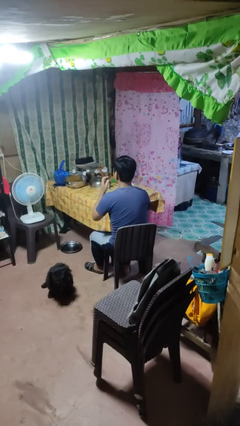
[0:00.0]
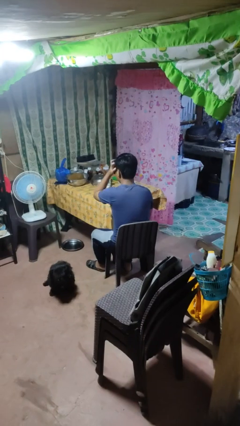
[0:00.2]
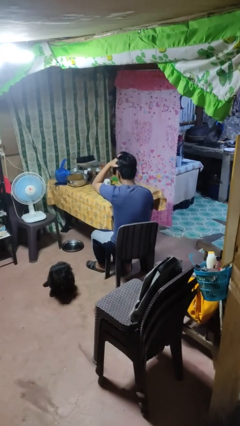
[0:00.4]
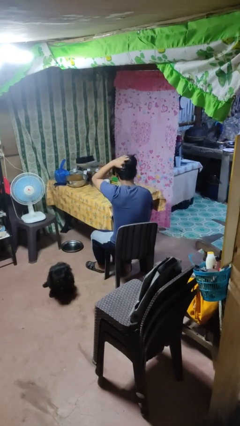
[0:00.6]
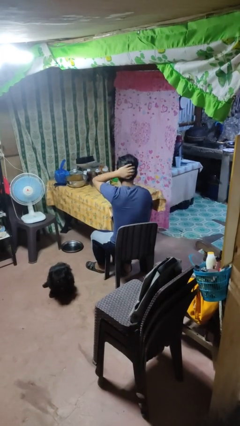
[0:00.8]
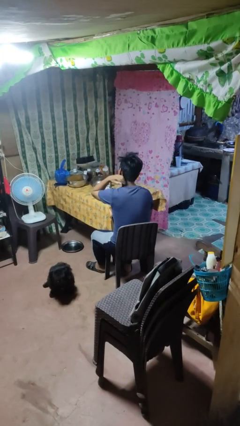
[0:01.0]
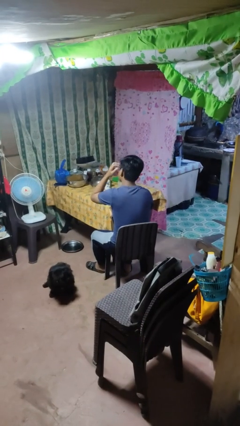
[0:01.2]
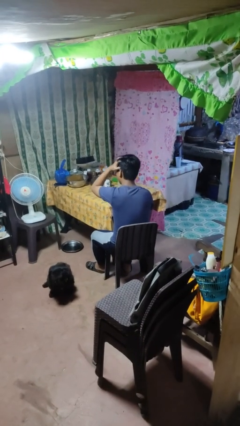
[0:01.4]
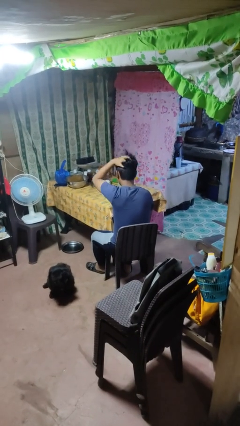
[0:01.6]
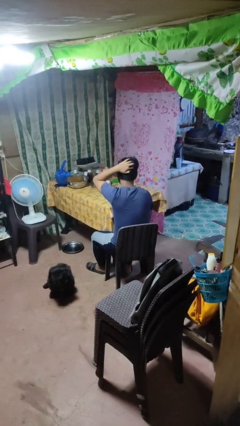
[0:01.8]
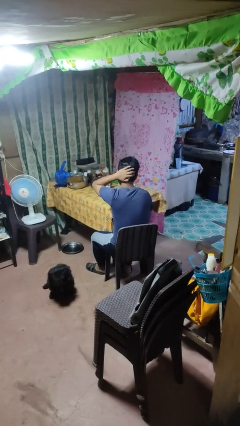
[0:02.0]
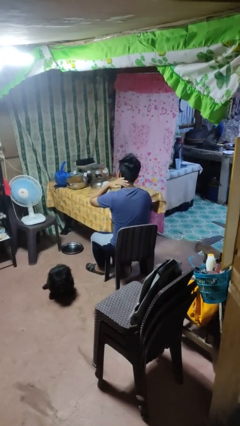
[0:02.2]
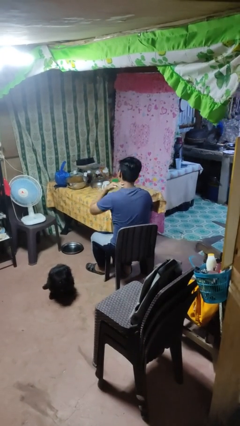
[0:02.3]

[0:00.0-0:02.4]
person strokes hair

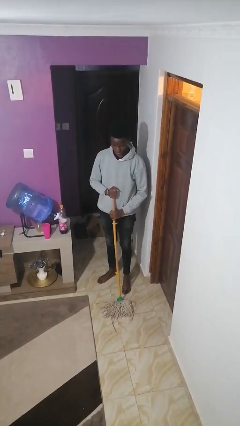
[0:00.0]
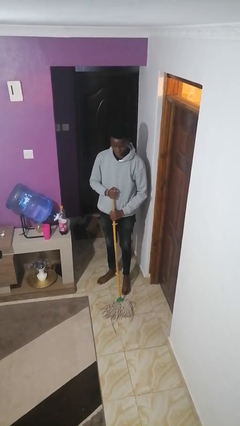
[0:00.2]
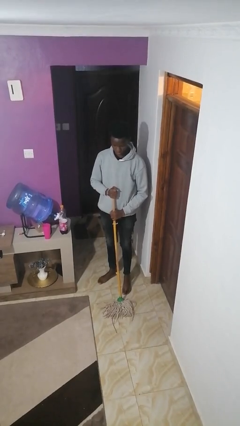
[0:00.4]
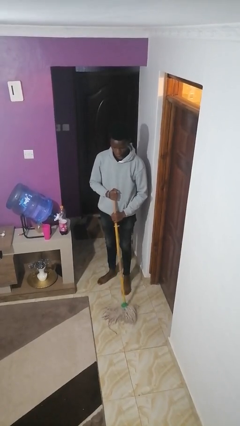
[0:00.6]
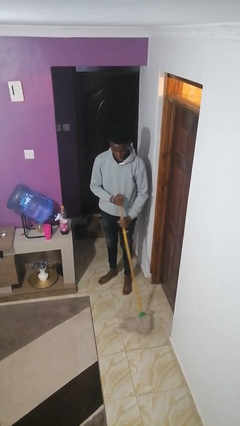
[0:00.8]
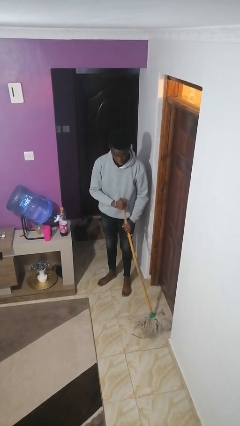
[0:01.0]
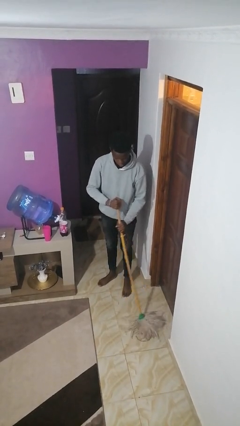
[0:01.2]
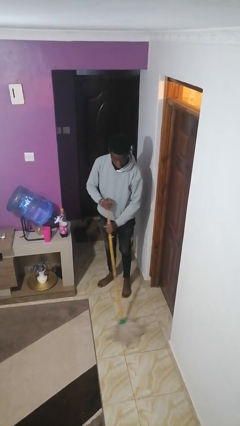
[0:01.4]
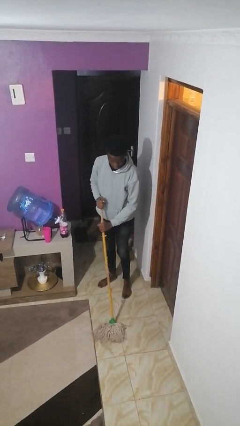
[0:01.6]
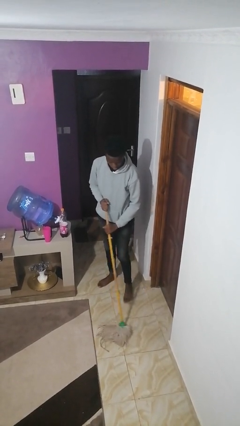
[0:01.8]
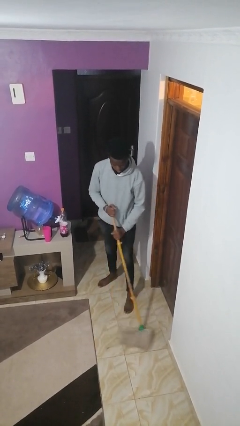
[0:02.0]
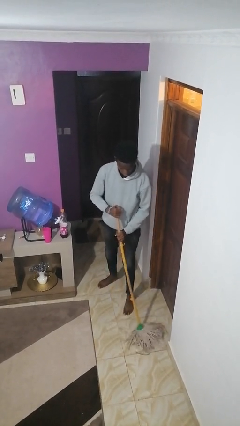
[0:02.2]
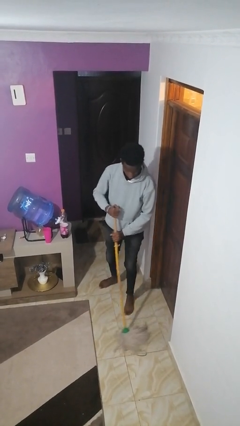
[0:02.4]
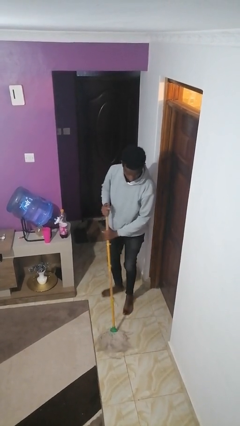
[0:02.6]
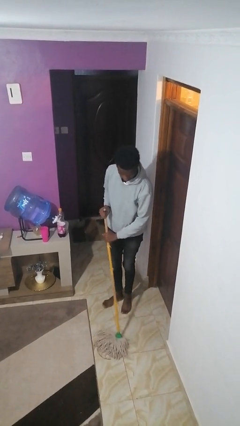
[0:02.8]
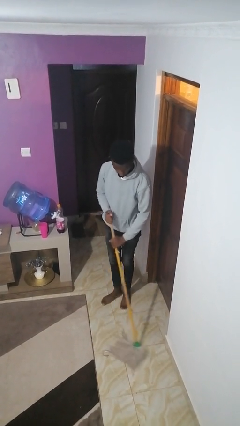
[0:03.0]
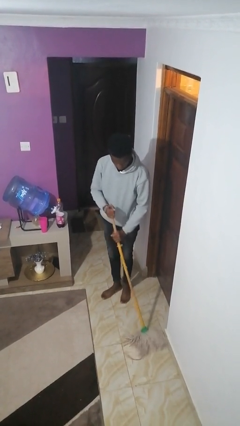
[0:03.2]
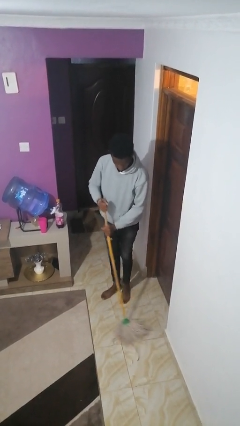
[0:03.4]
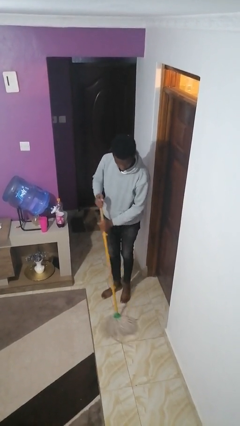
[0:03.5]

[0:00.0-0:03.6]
person mops

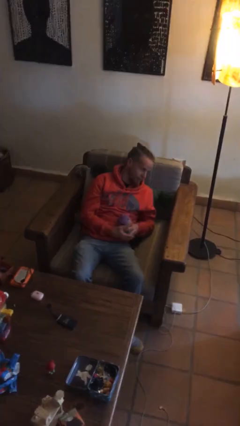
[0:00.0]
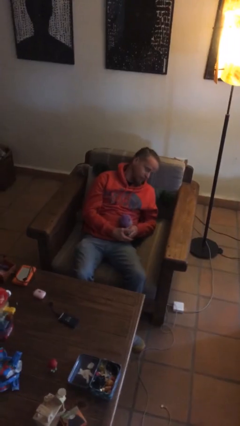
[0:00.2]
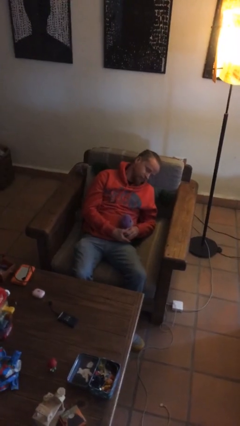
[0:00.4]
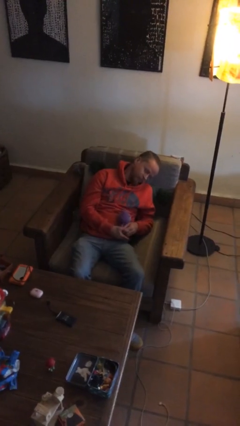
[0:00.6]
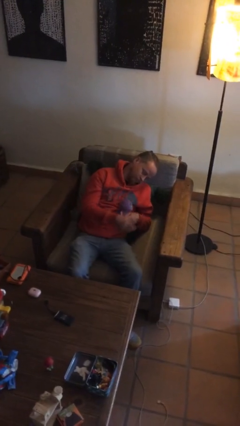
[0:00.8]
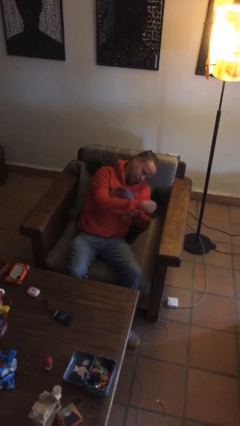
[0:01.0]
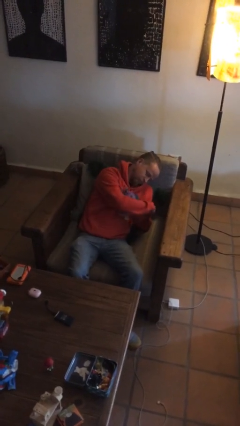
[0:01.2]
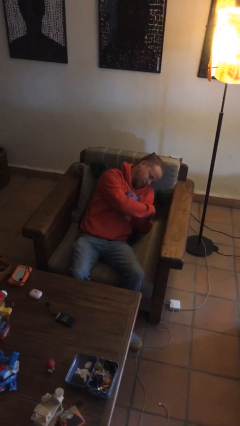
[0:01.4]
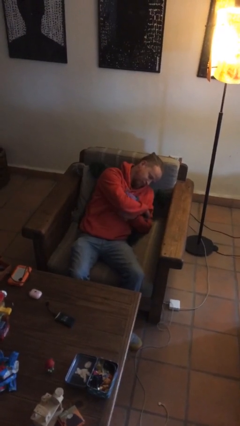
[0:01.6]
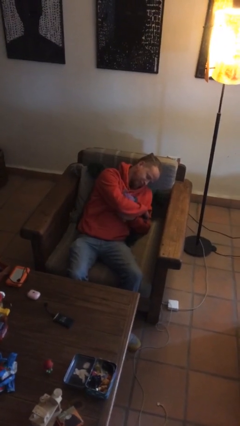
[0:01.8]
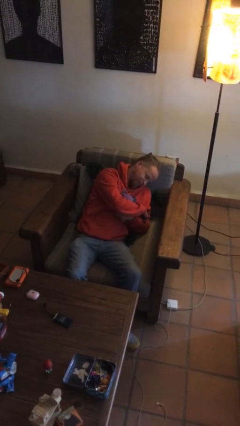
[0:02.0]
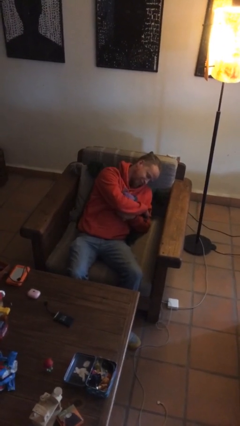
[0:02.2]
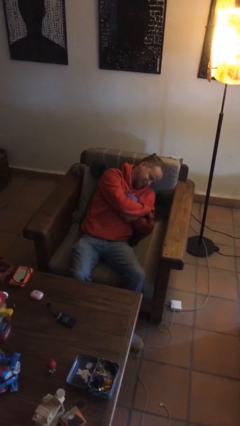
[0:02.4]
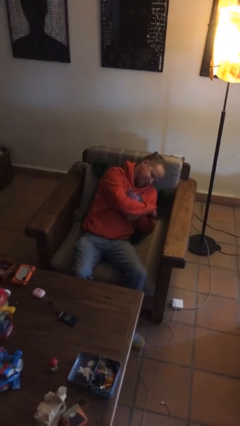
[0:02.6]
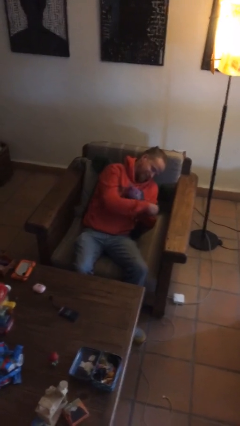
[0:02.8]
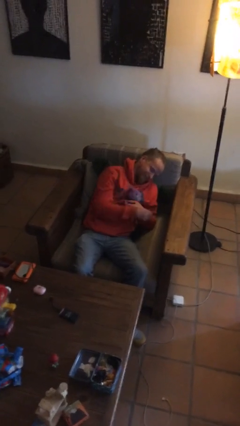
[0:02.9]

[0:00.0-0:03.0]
person hugs stuffed animal

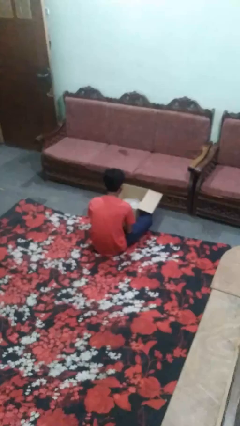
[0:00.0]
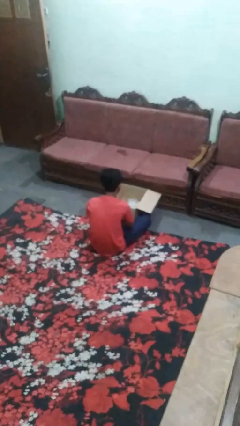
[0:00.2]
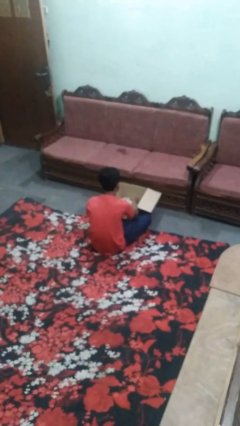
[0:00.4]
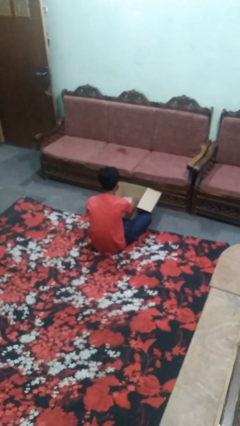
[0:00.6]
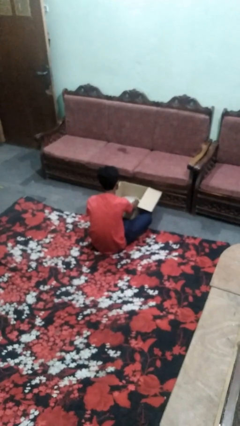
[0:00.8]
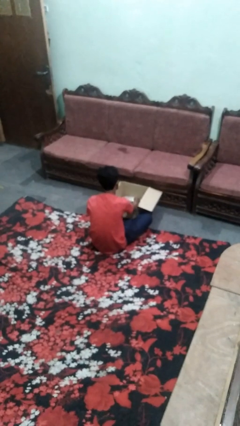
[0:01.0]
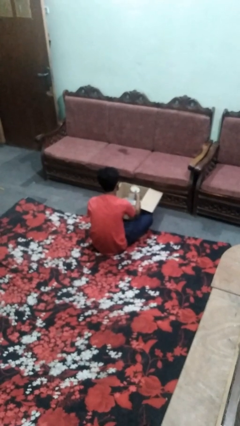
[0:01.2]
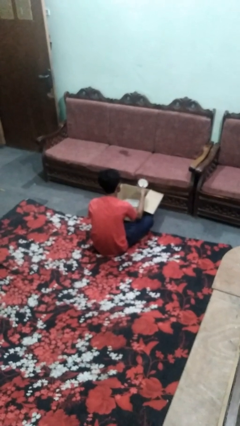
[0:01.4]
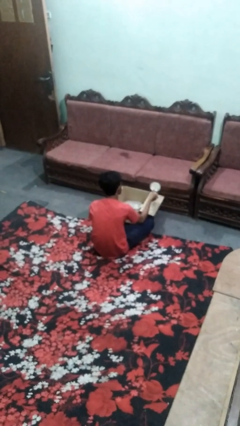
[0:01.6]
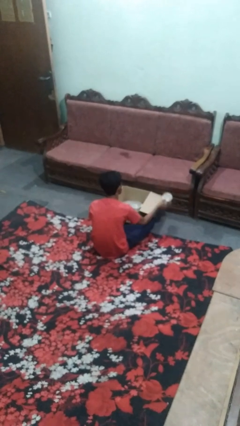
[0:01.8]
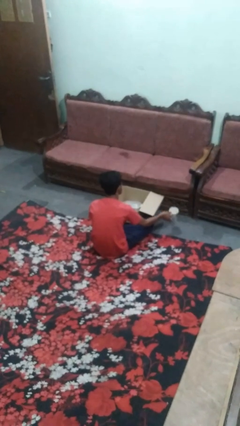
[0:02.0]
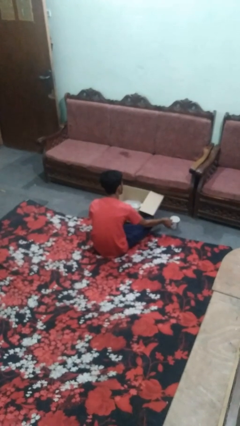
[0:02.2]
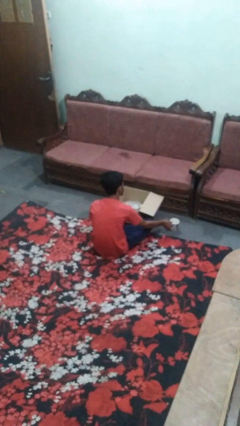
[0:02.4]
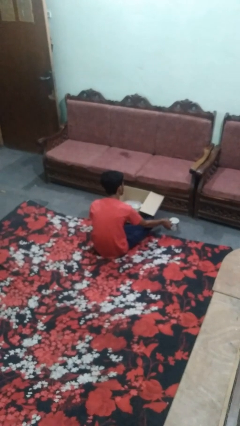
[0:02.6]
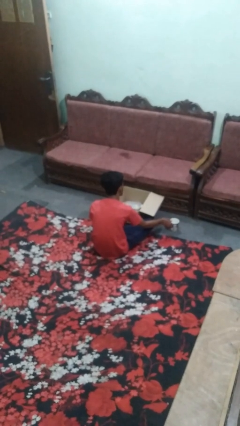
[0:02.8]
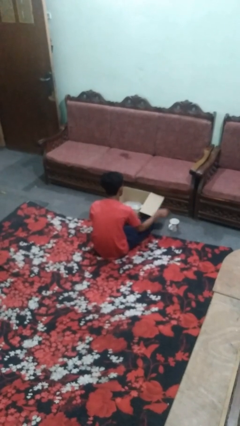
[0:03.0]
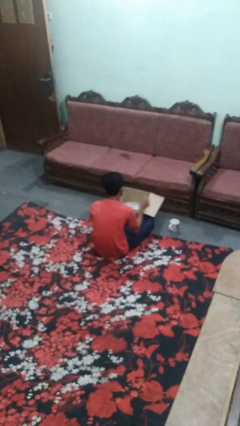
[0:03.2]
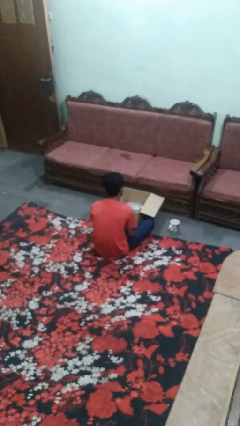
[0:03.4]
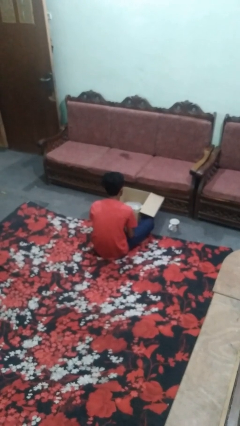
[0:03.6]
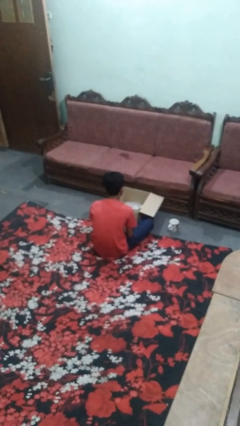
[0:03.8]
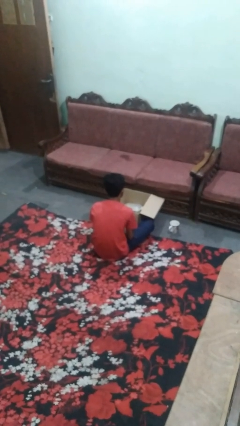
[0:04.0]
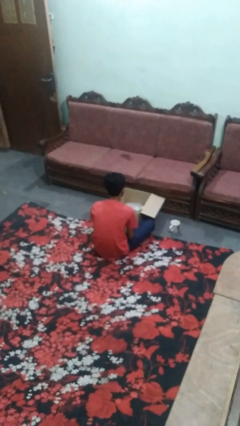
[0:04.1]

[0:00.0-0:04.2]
person takes object from box

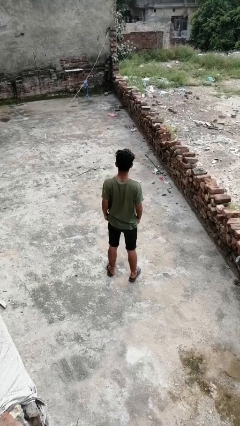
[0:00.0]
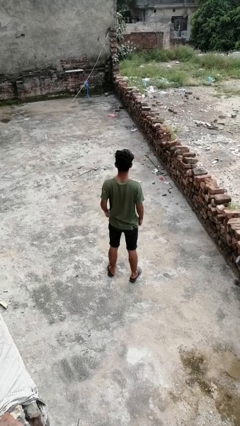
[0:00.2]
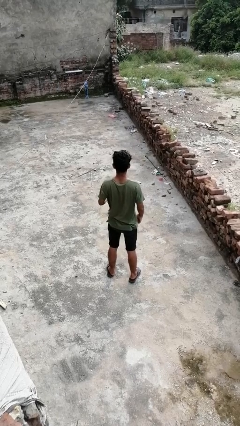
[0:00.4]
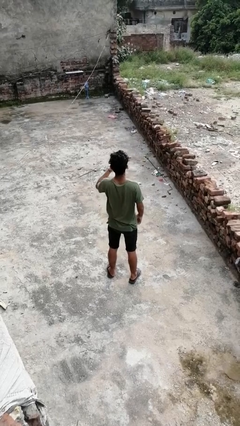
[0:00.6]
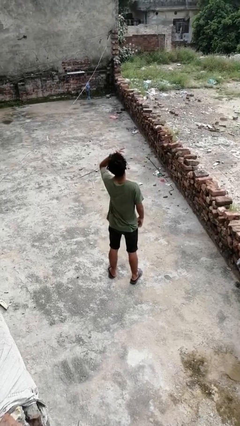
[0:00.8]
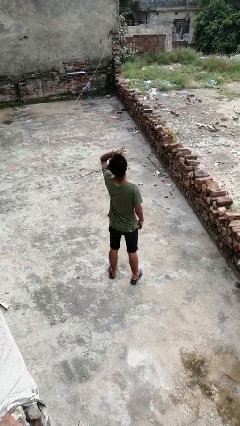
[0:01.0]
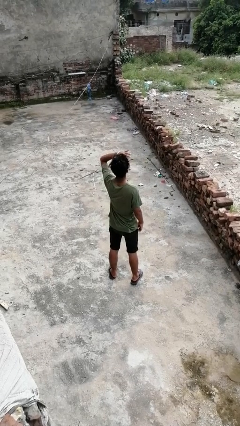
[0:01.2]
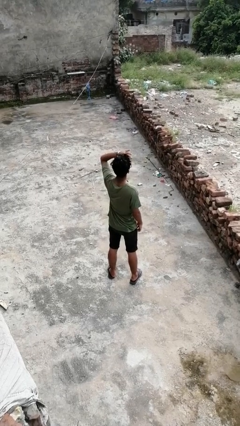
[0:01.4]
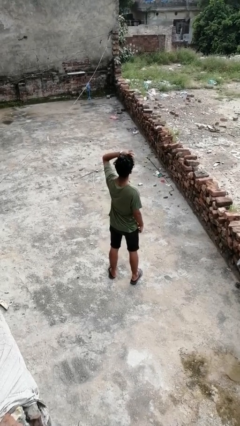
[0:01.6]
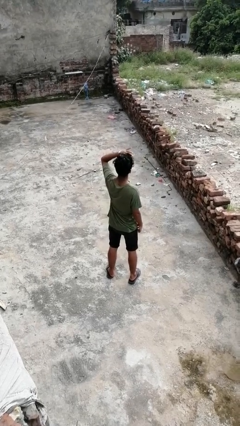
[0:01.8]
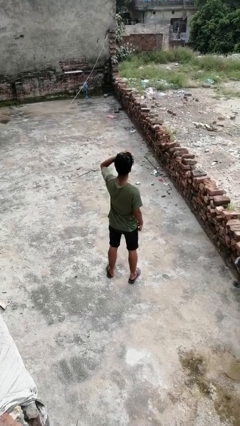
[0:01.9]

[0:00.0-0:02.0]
person shades eyes

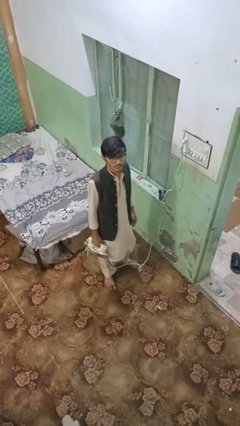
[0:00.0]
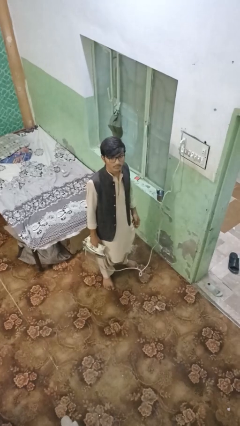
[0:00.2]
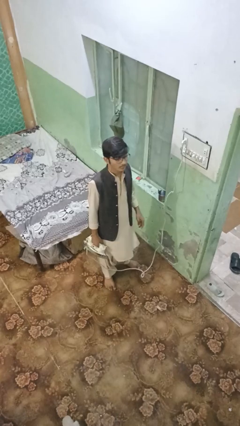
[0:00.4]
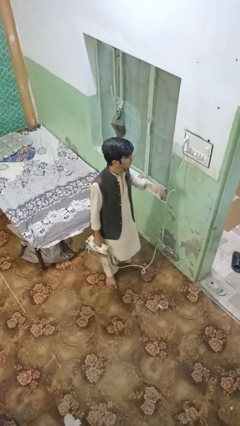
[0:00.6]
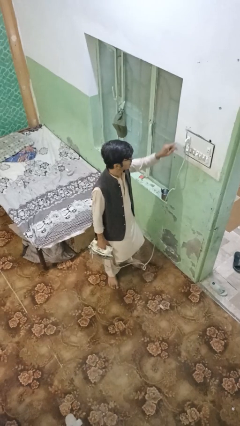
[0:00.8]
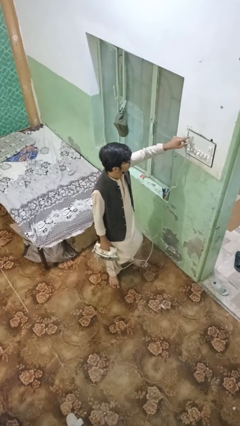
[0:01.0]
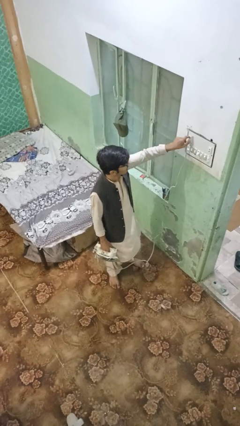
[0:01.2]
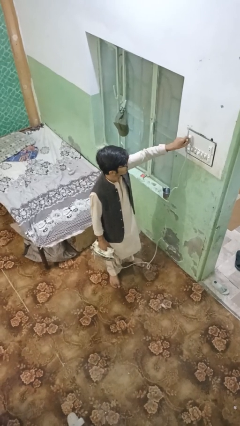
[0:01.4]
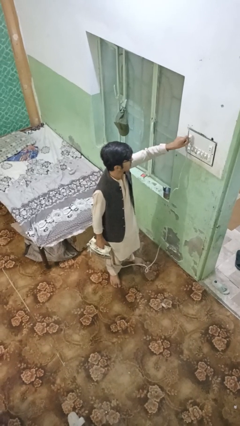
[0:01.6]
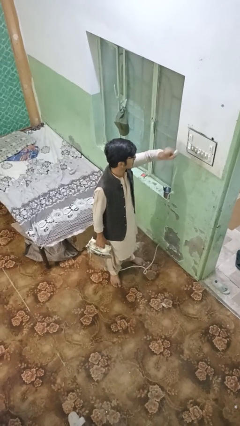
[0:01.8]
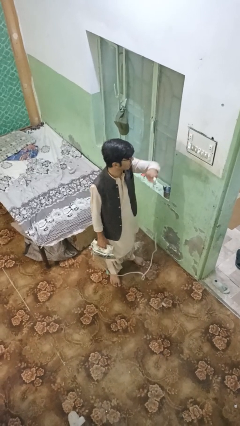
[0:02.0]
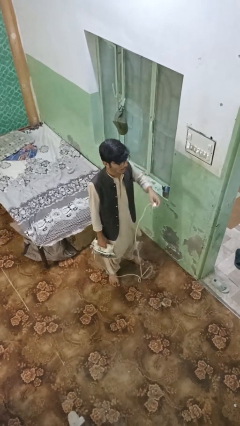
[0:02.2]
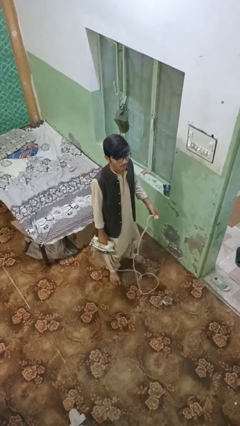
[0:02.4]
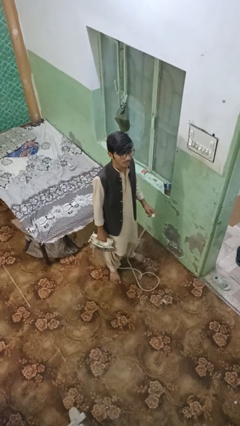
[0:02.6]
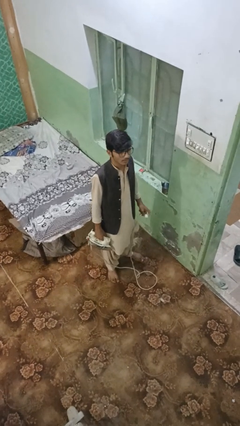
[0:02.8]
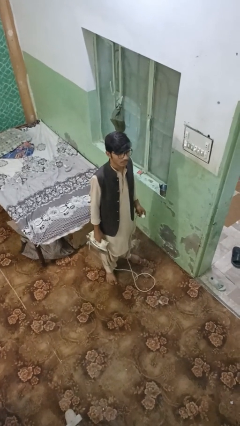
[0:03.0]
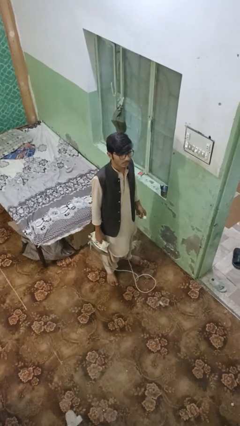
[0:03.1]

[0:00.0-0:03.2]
person unplugs from electrical socket
